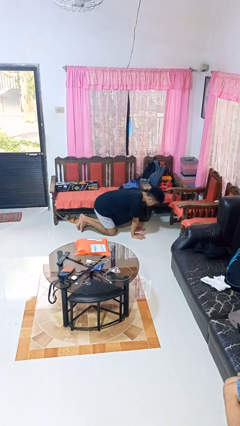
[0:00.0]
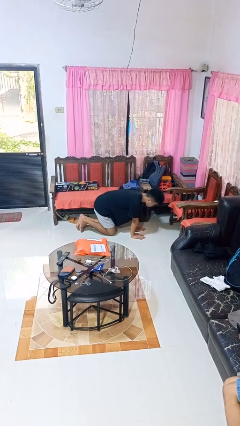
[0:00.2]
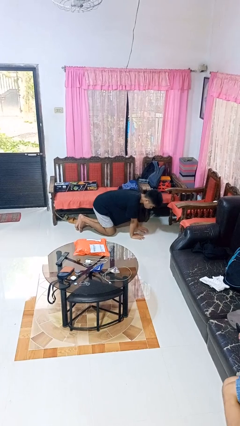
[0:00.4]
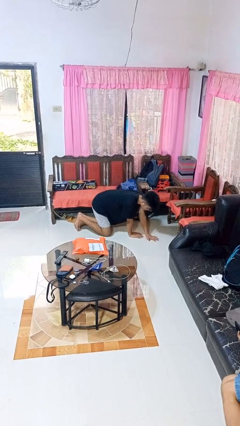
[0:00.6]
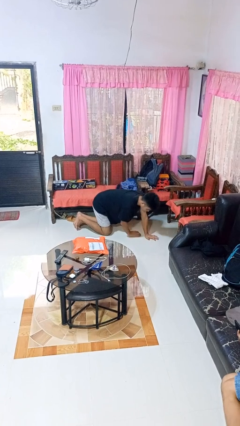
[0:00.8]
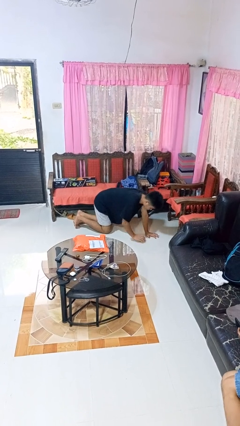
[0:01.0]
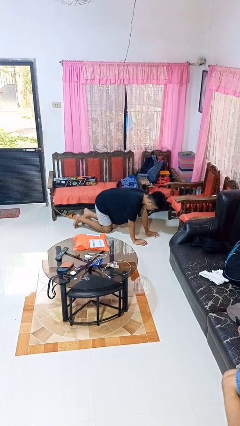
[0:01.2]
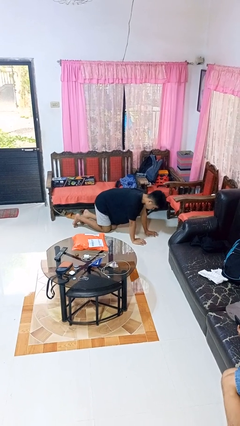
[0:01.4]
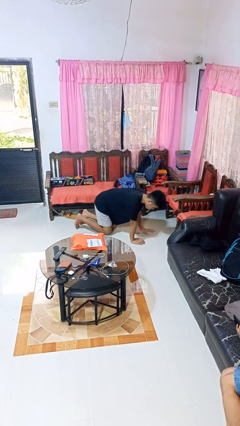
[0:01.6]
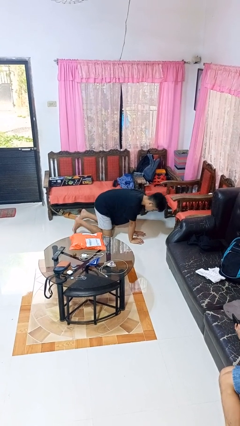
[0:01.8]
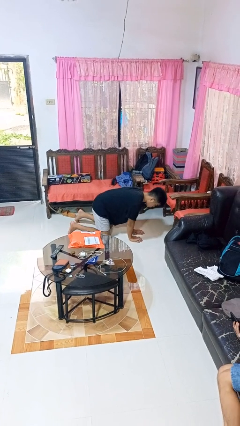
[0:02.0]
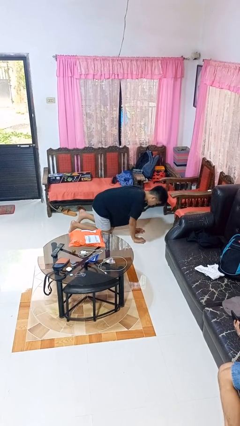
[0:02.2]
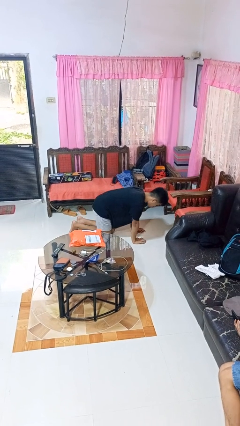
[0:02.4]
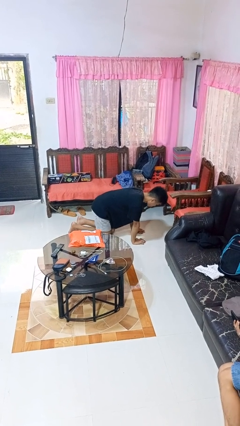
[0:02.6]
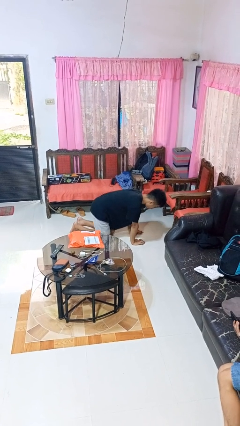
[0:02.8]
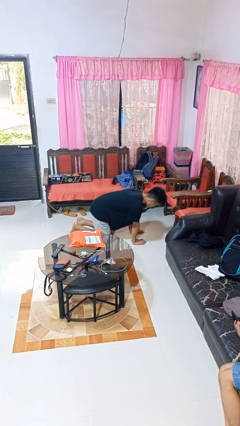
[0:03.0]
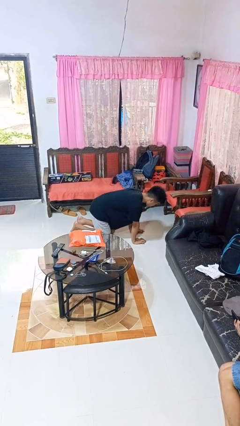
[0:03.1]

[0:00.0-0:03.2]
person crawls

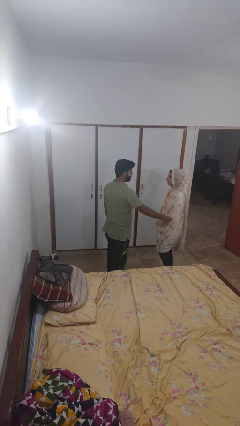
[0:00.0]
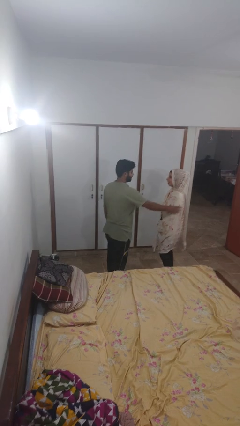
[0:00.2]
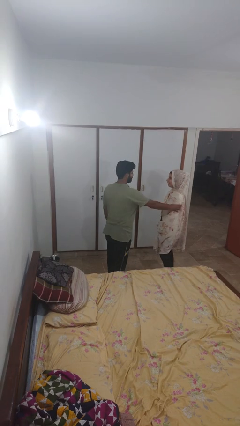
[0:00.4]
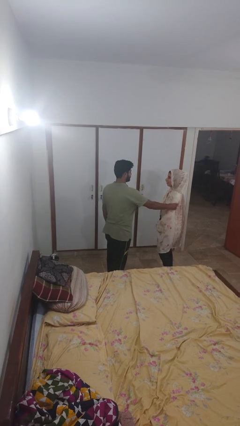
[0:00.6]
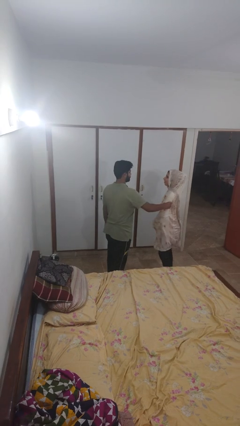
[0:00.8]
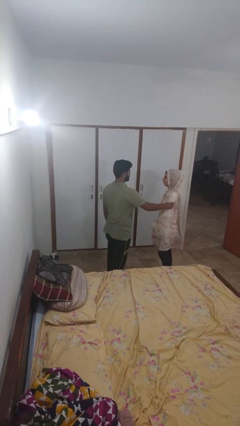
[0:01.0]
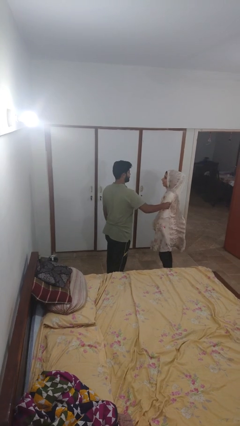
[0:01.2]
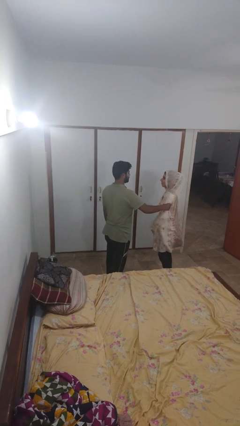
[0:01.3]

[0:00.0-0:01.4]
person grabs person by bicep

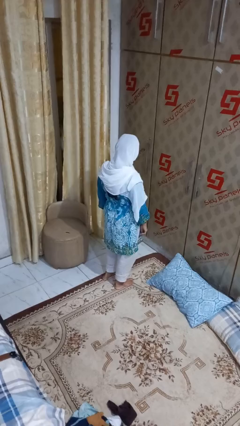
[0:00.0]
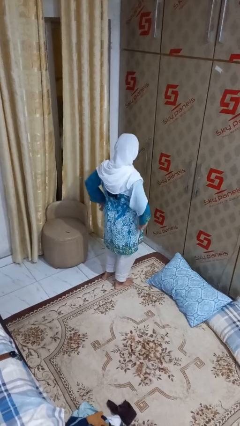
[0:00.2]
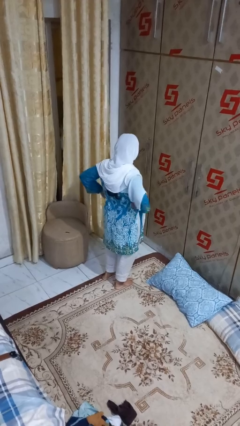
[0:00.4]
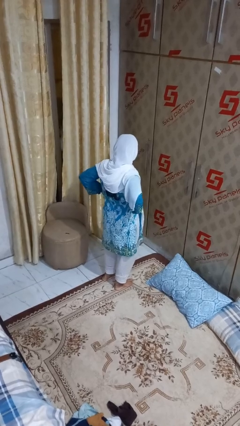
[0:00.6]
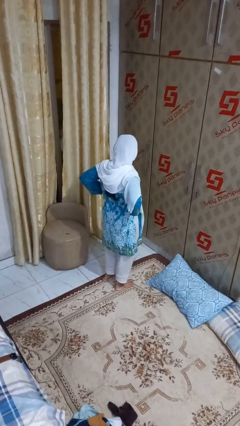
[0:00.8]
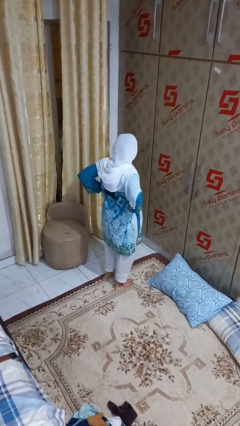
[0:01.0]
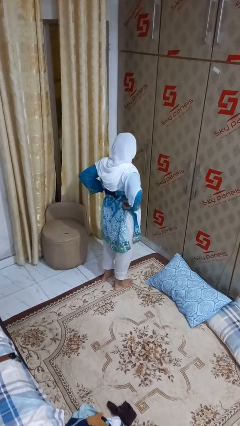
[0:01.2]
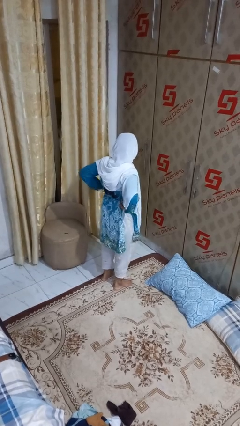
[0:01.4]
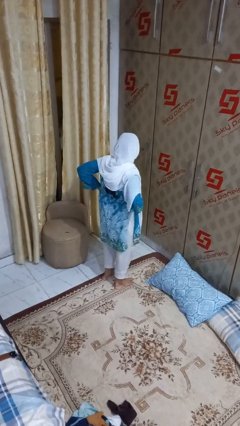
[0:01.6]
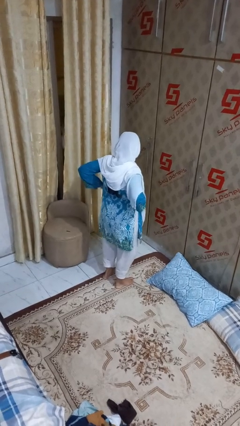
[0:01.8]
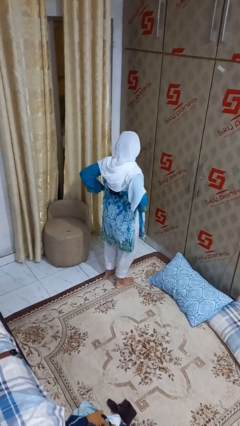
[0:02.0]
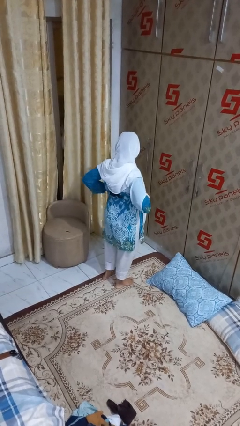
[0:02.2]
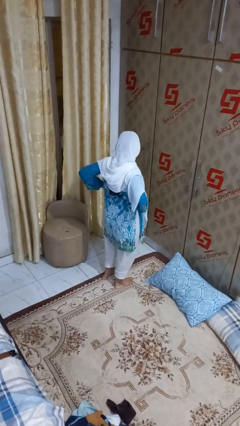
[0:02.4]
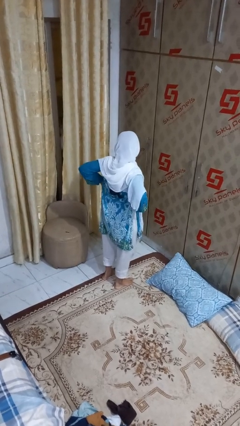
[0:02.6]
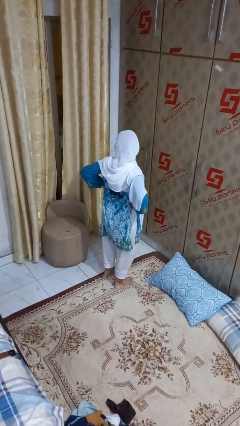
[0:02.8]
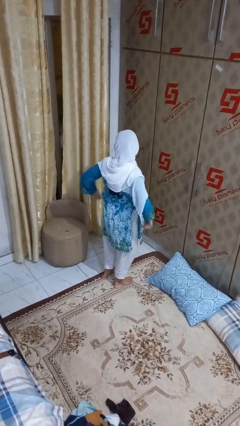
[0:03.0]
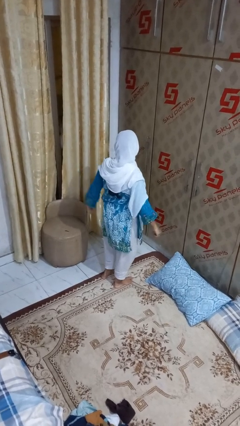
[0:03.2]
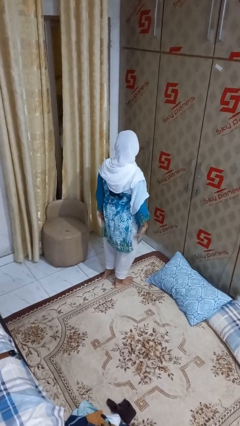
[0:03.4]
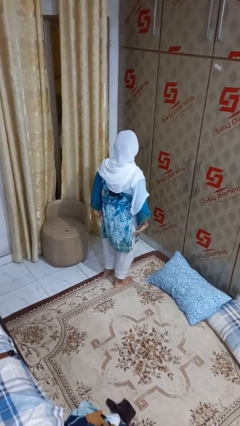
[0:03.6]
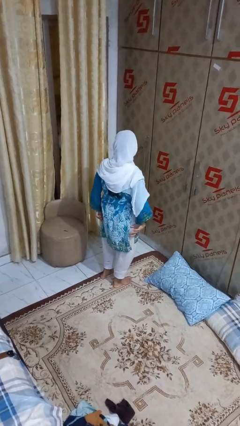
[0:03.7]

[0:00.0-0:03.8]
person hikes up pants

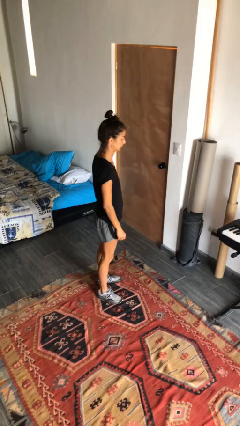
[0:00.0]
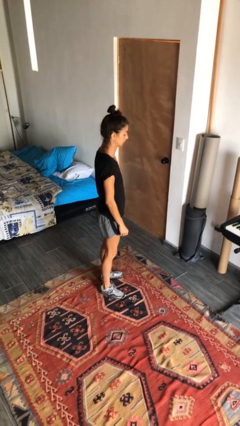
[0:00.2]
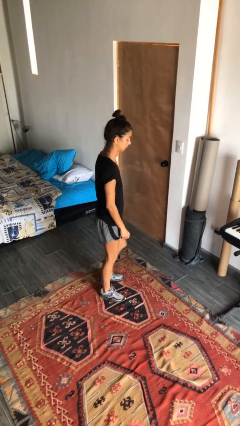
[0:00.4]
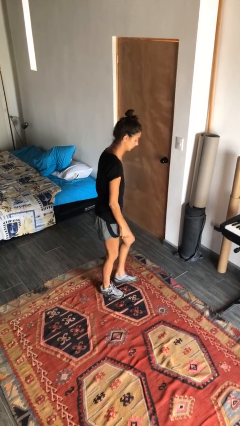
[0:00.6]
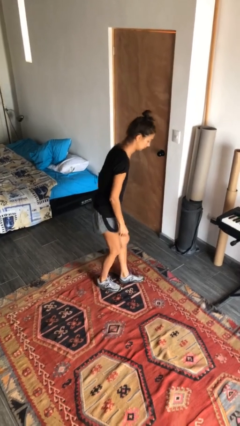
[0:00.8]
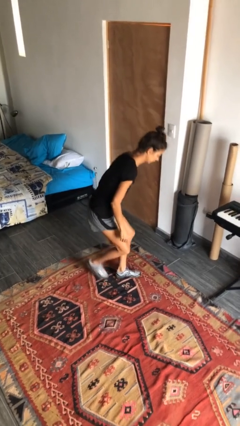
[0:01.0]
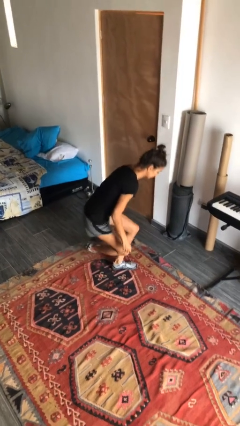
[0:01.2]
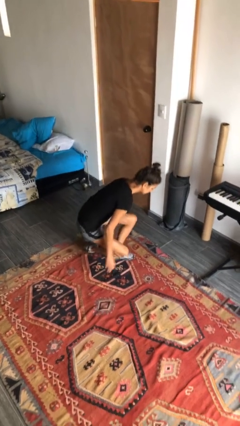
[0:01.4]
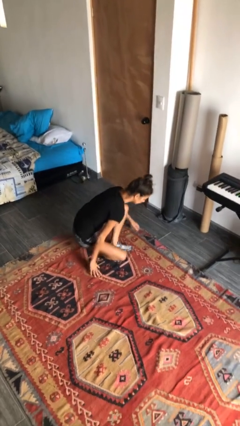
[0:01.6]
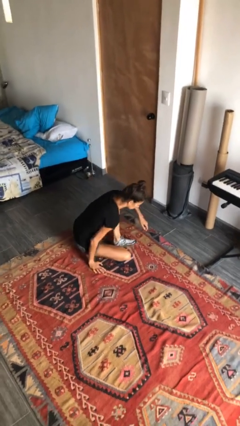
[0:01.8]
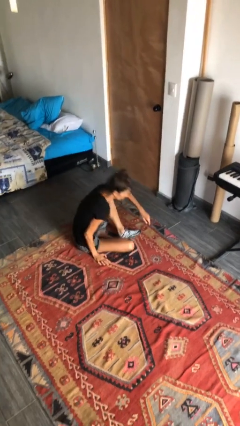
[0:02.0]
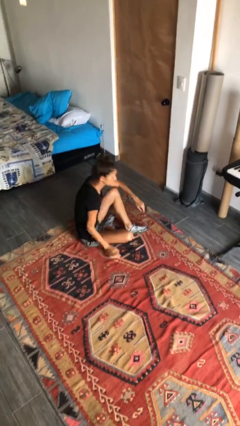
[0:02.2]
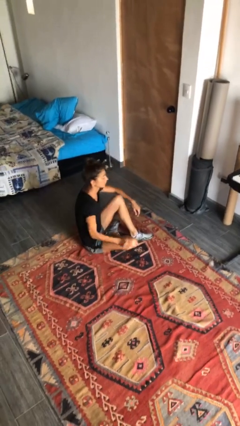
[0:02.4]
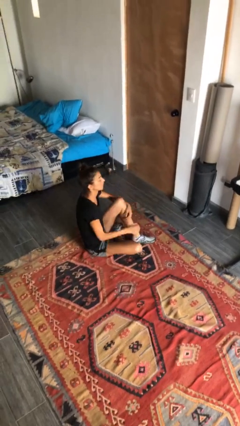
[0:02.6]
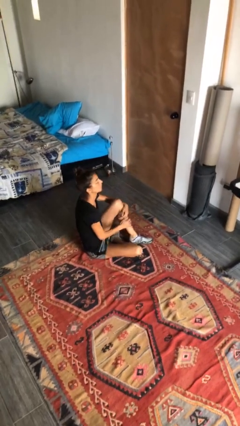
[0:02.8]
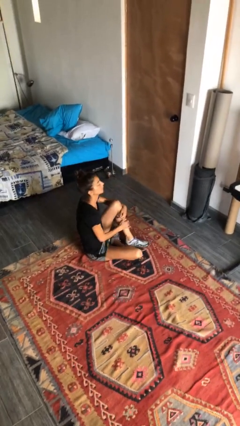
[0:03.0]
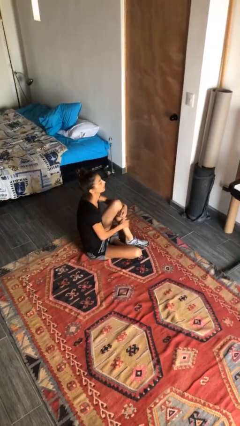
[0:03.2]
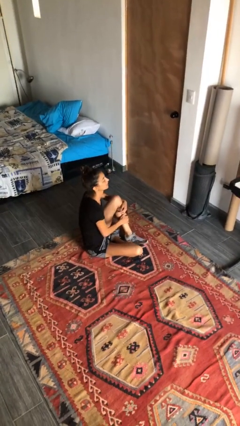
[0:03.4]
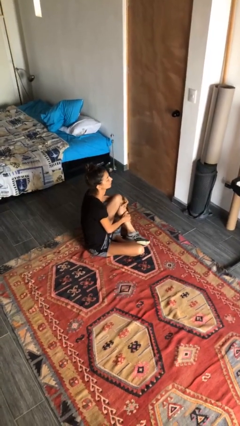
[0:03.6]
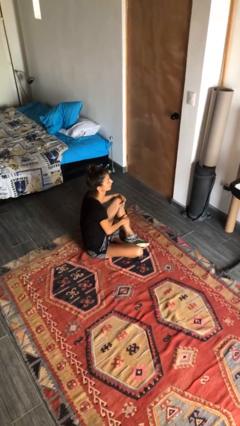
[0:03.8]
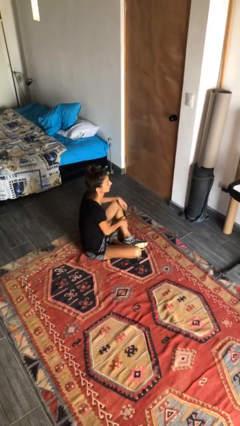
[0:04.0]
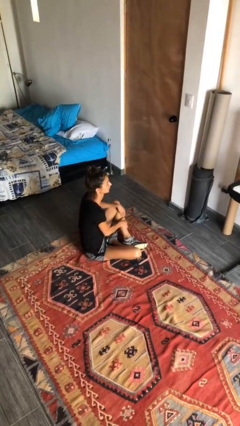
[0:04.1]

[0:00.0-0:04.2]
person sits crisscross

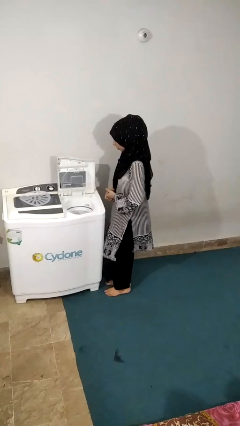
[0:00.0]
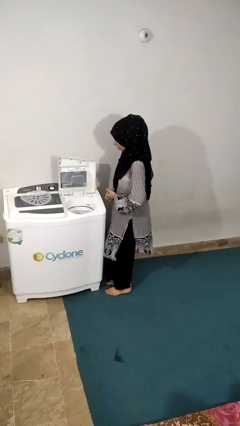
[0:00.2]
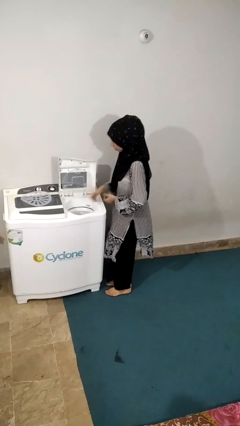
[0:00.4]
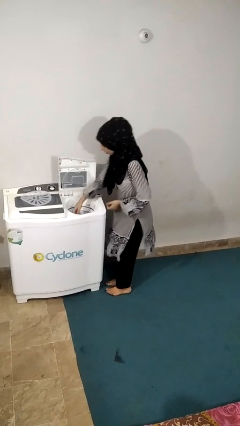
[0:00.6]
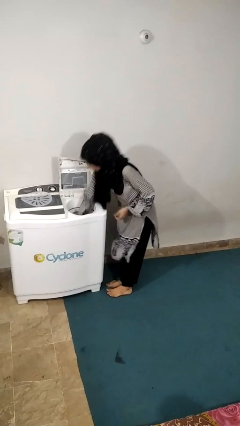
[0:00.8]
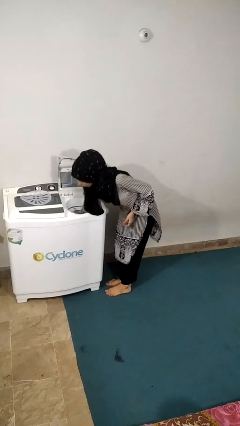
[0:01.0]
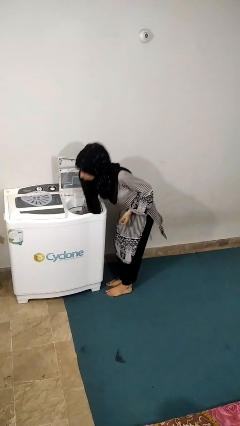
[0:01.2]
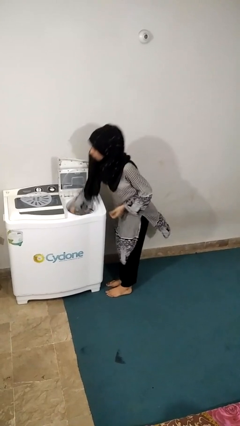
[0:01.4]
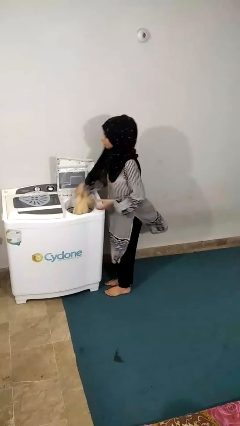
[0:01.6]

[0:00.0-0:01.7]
person unloads dryer

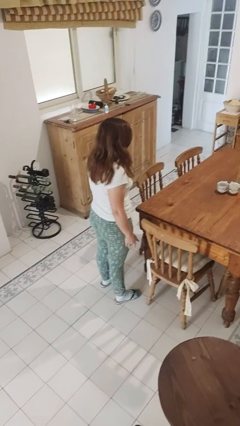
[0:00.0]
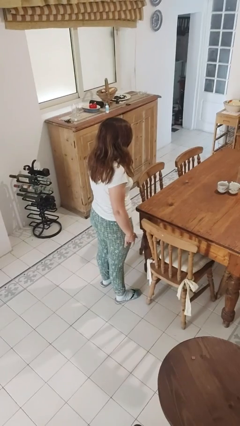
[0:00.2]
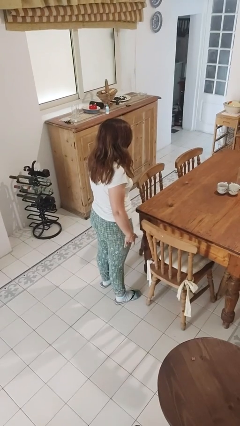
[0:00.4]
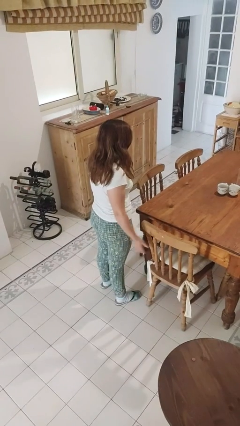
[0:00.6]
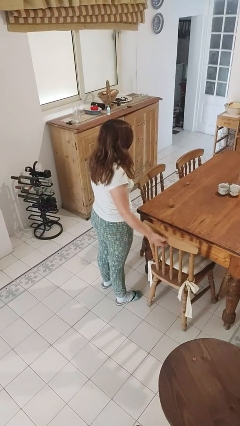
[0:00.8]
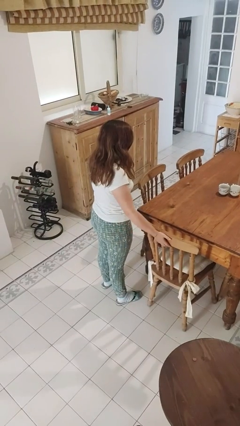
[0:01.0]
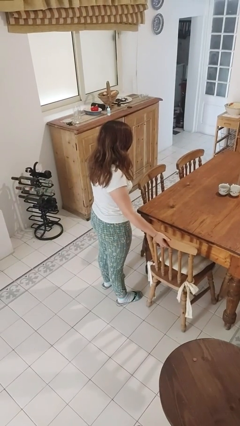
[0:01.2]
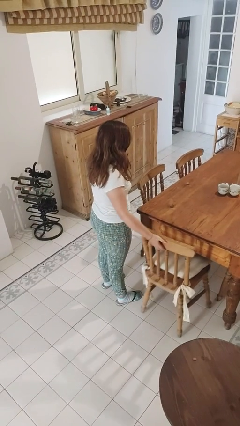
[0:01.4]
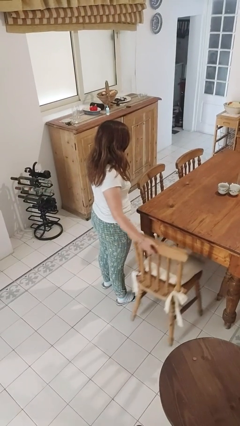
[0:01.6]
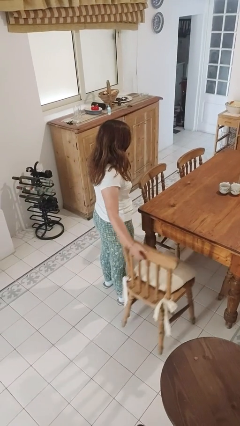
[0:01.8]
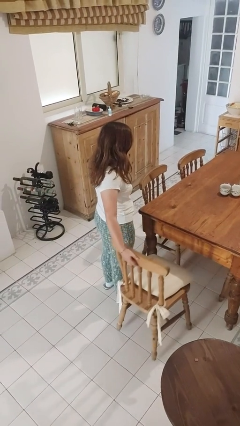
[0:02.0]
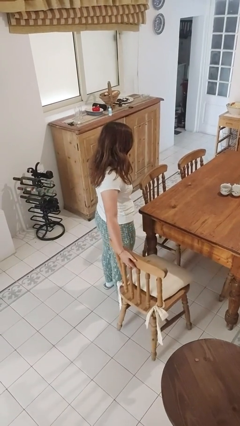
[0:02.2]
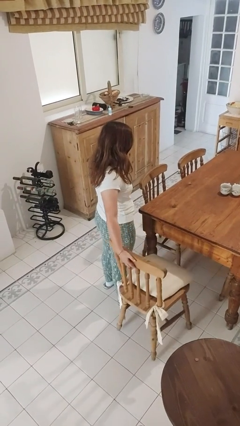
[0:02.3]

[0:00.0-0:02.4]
person pulls out chair

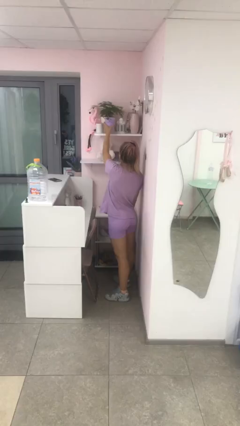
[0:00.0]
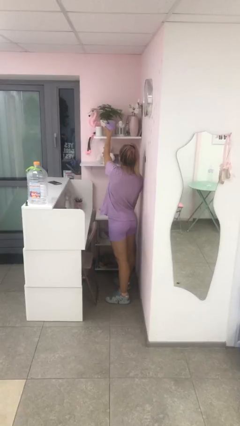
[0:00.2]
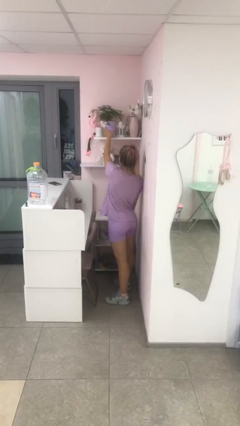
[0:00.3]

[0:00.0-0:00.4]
person puts down object into cabinet
